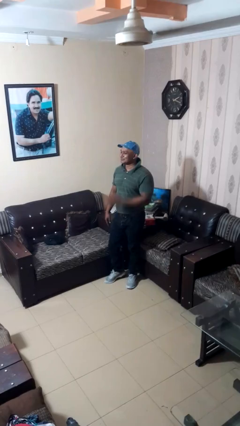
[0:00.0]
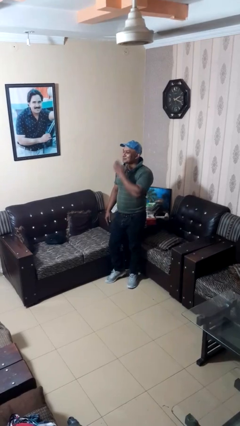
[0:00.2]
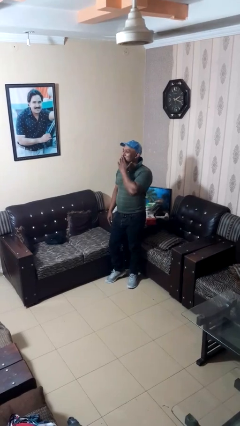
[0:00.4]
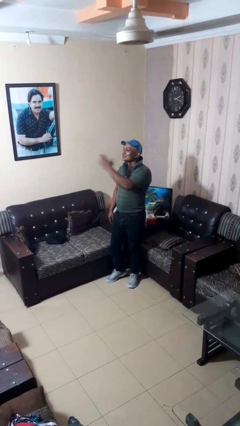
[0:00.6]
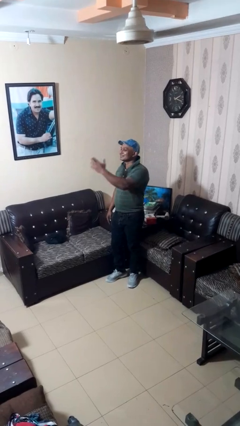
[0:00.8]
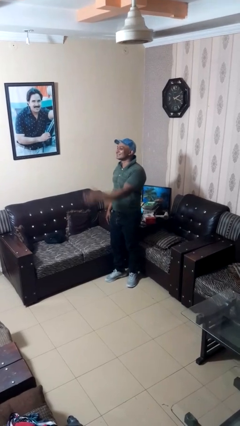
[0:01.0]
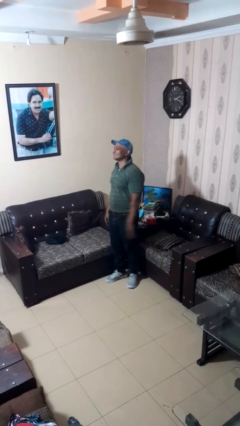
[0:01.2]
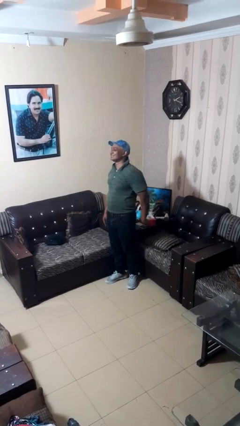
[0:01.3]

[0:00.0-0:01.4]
person gestures blow kiss

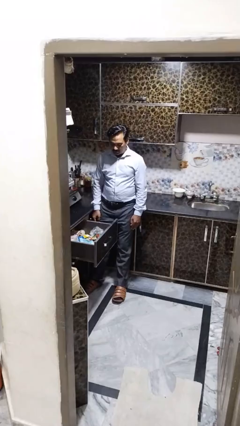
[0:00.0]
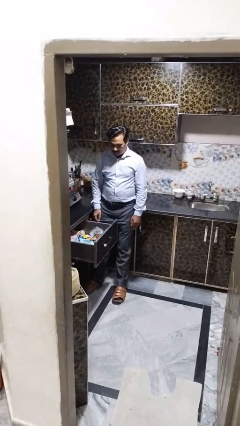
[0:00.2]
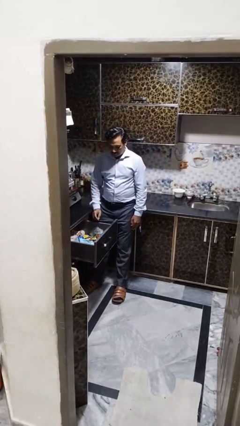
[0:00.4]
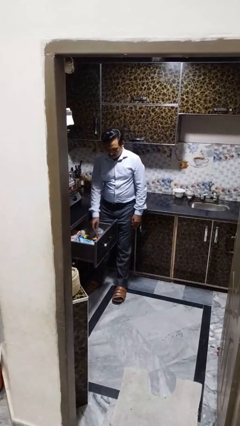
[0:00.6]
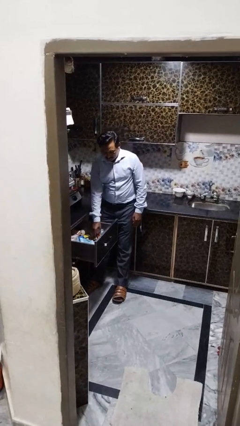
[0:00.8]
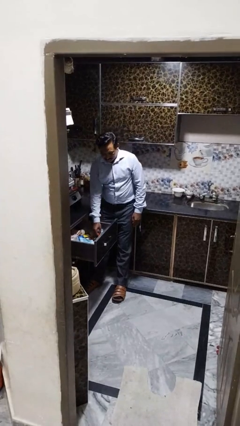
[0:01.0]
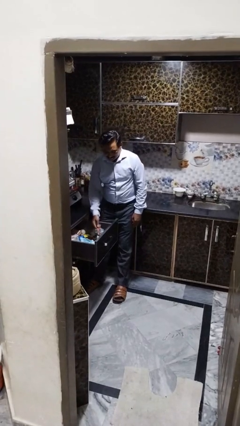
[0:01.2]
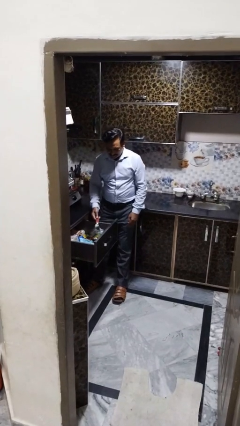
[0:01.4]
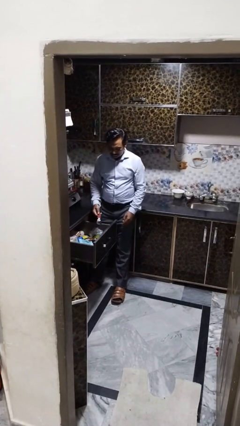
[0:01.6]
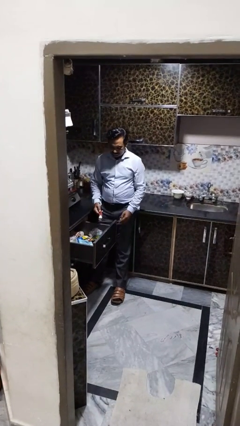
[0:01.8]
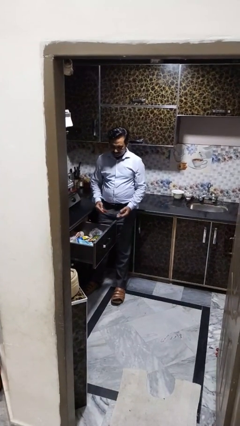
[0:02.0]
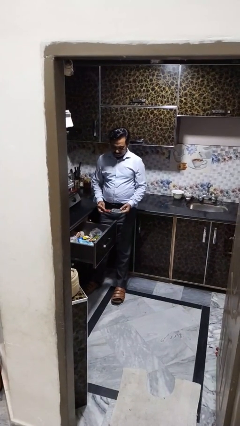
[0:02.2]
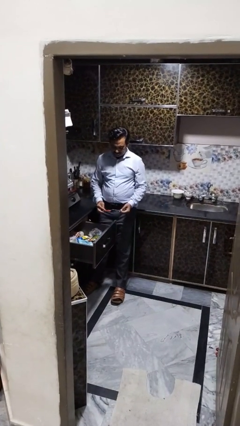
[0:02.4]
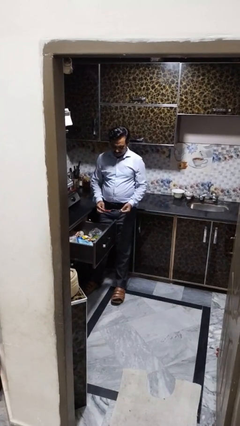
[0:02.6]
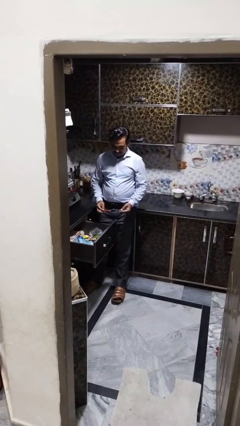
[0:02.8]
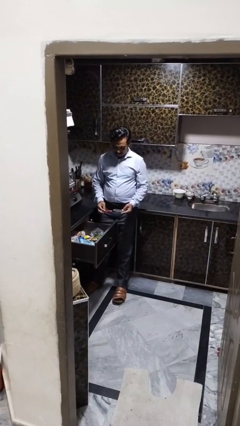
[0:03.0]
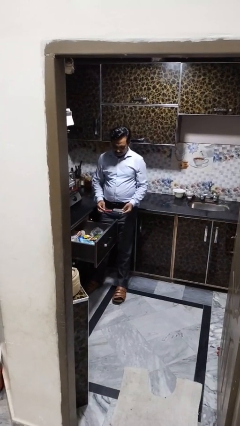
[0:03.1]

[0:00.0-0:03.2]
person takes object from kitchen drawer

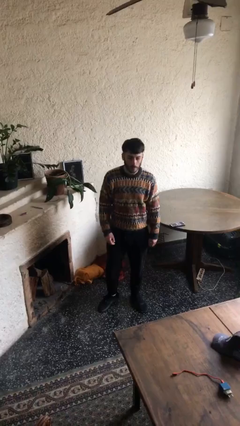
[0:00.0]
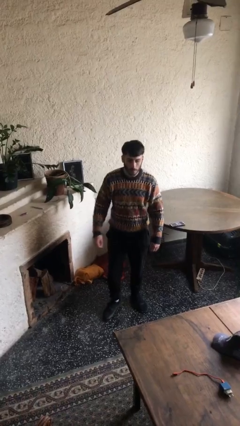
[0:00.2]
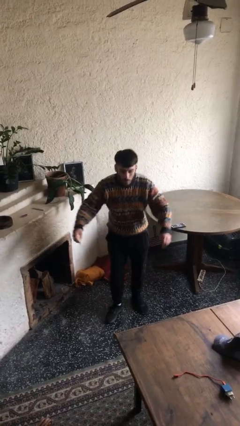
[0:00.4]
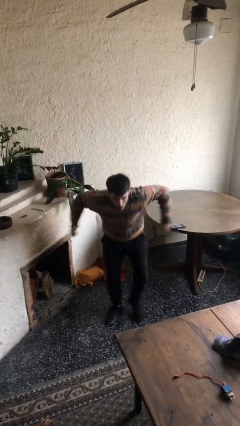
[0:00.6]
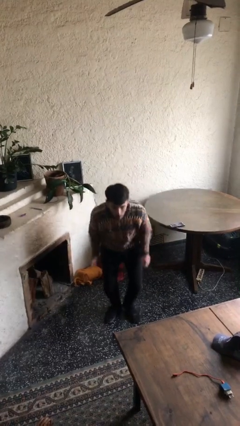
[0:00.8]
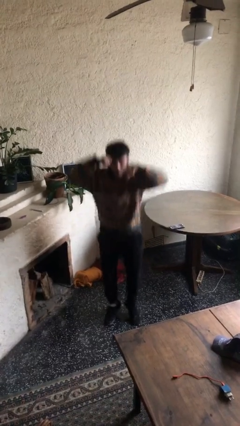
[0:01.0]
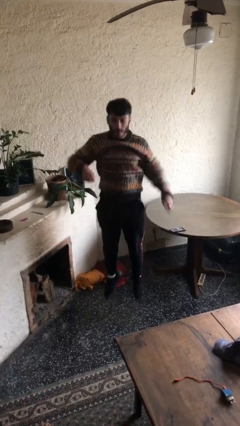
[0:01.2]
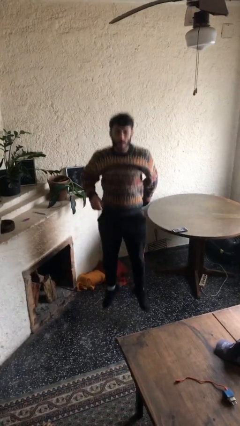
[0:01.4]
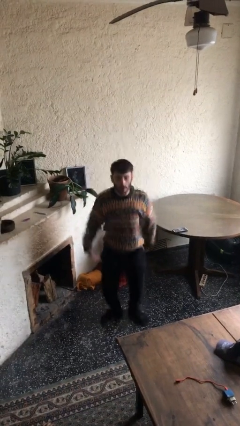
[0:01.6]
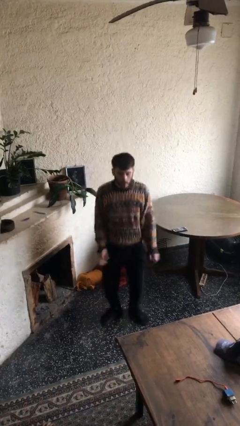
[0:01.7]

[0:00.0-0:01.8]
person jumps

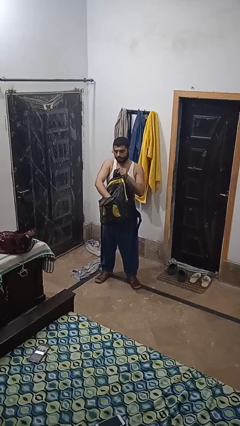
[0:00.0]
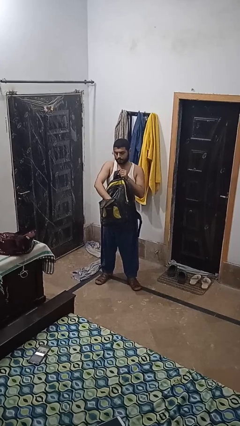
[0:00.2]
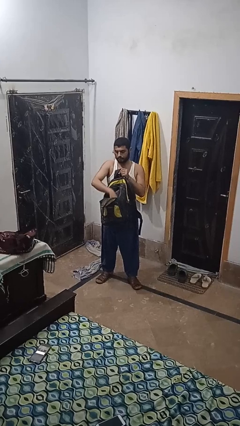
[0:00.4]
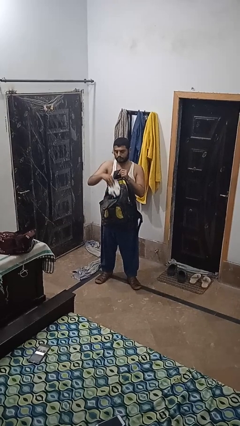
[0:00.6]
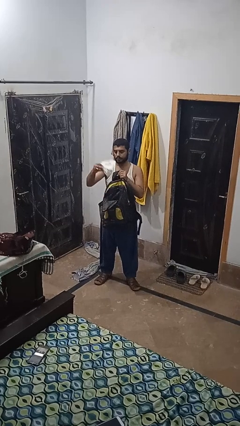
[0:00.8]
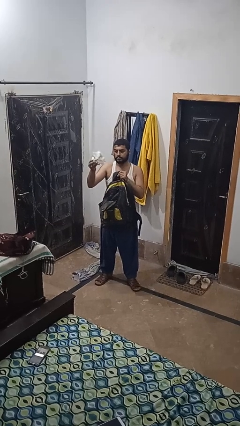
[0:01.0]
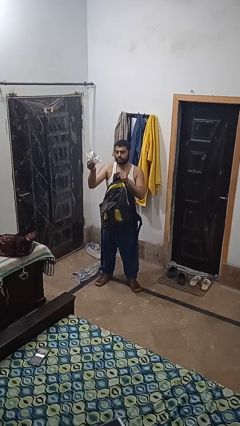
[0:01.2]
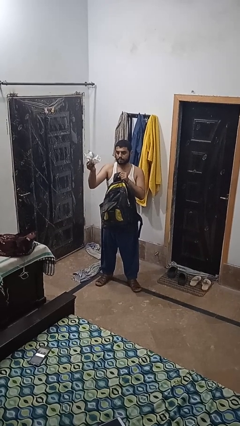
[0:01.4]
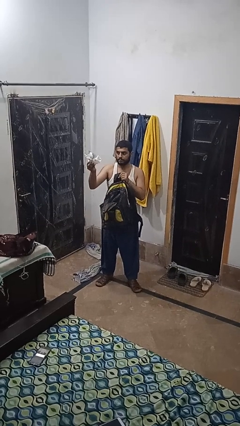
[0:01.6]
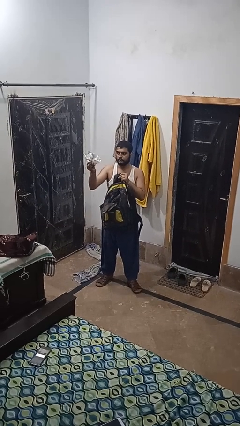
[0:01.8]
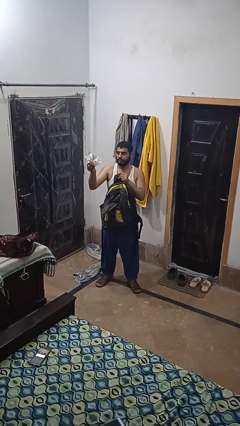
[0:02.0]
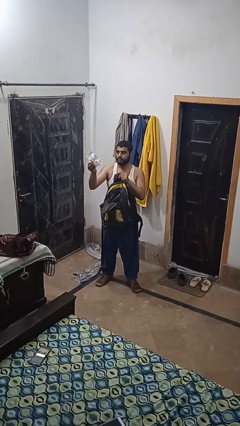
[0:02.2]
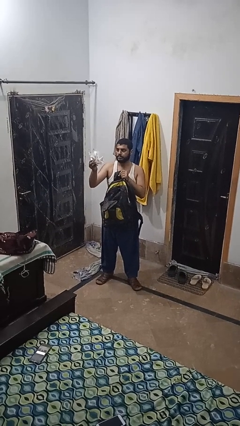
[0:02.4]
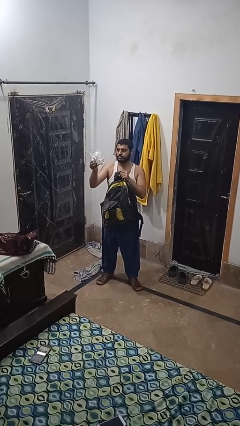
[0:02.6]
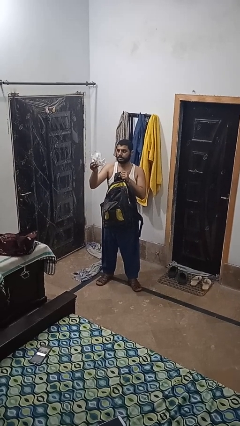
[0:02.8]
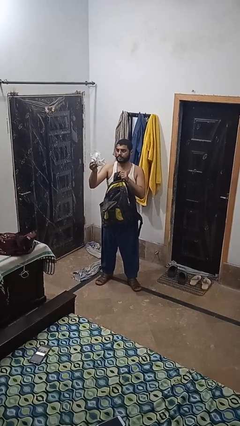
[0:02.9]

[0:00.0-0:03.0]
person takes object from backpack

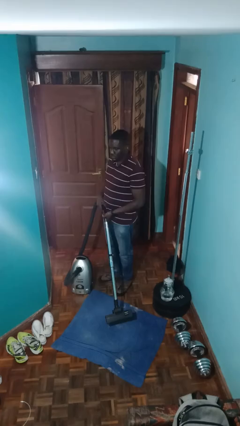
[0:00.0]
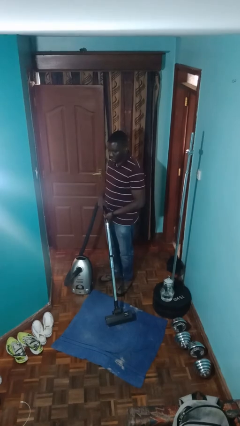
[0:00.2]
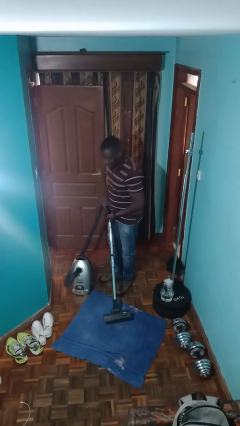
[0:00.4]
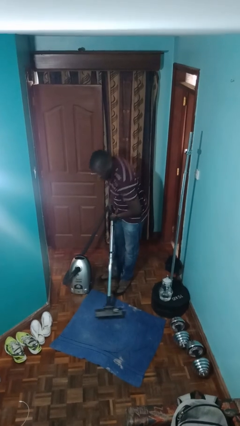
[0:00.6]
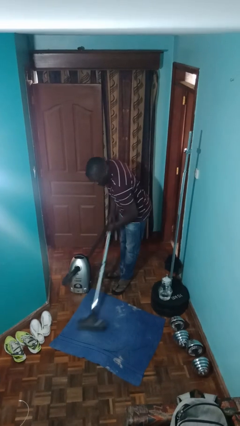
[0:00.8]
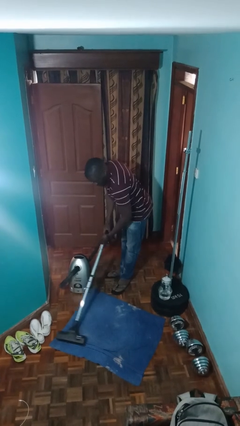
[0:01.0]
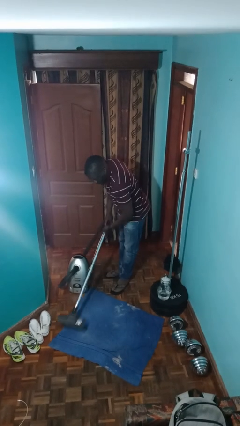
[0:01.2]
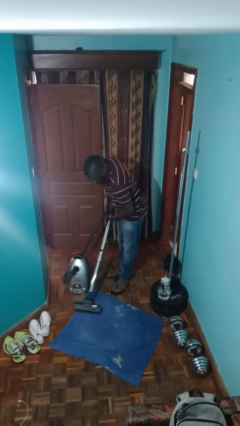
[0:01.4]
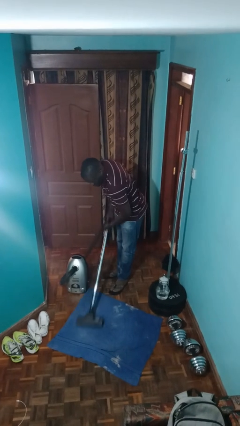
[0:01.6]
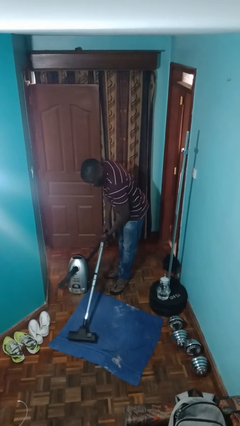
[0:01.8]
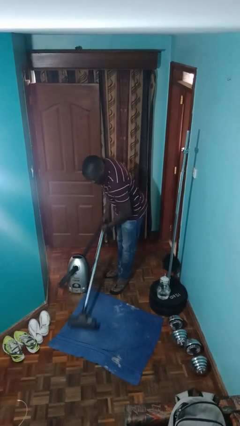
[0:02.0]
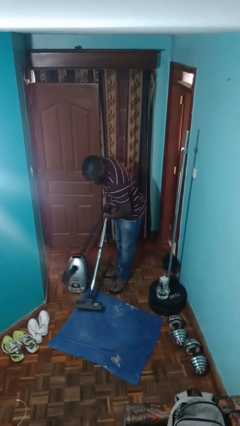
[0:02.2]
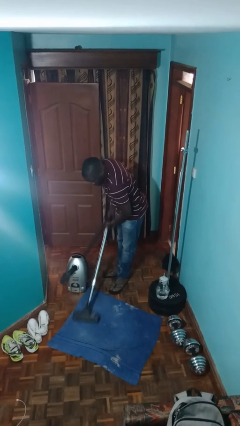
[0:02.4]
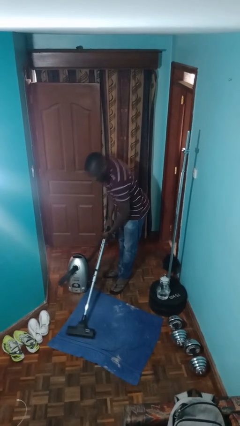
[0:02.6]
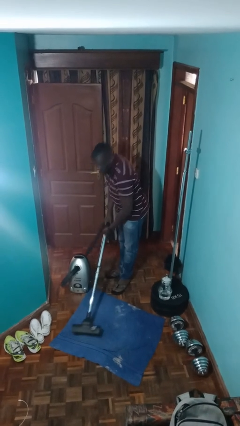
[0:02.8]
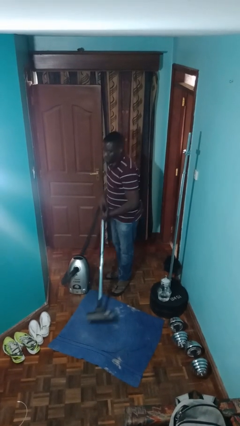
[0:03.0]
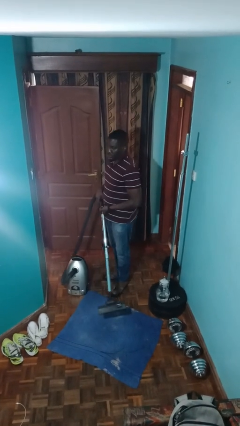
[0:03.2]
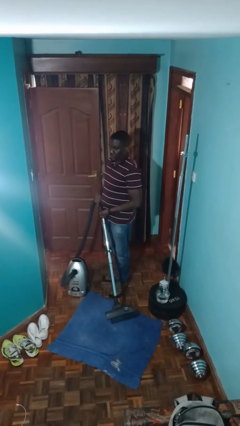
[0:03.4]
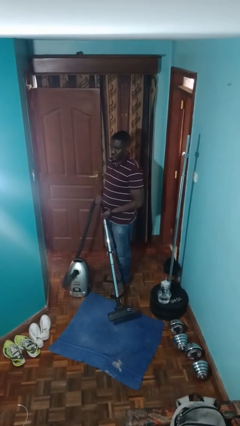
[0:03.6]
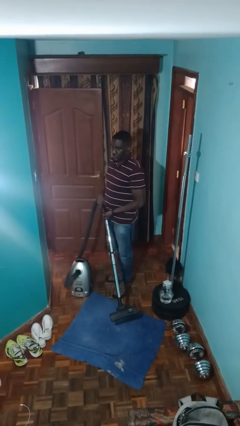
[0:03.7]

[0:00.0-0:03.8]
person vacuums carpet

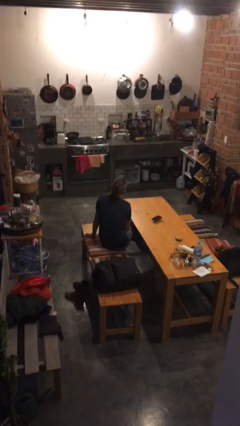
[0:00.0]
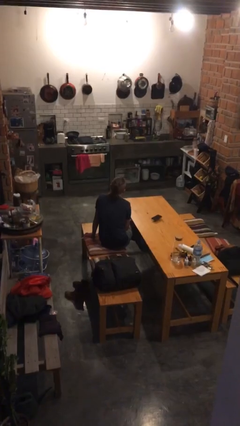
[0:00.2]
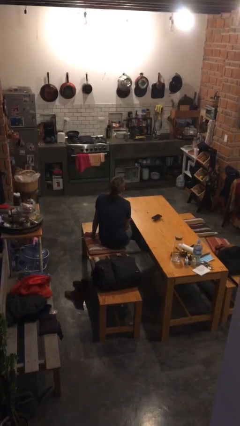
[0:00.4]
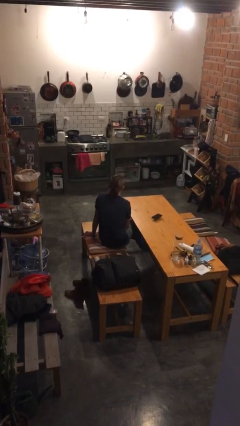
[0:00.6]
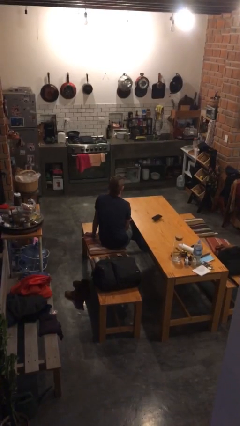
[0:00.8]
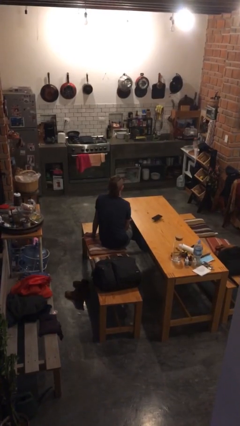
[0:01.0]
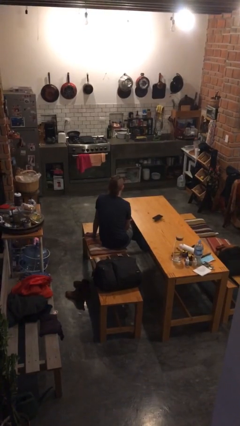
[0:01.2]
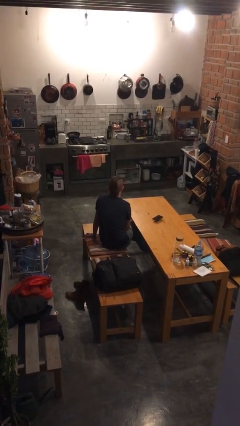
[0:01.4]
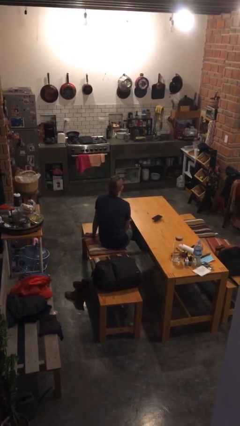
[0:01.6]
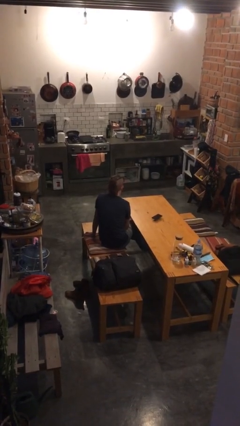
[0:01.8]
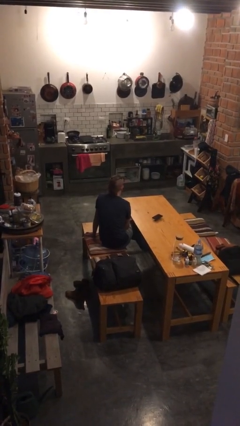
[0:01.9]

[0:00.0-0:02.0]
person nods head

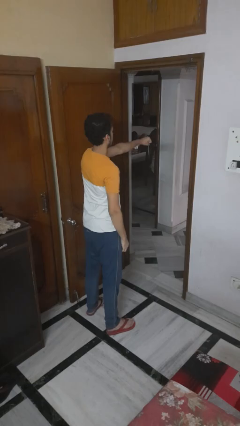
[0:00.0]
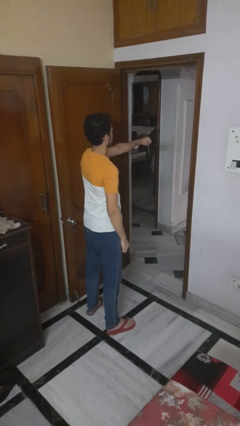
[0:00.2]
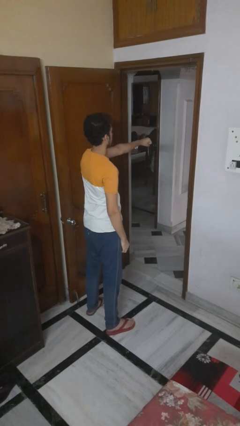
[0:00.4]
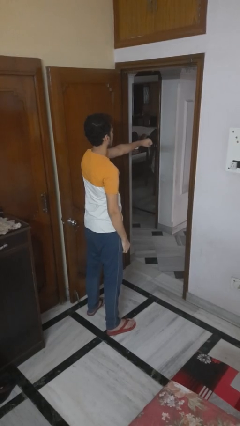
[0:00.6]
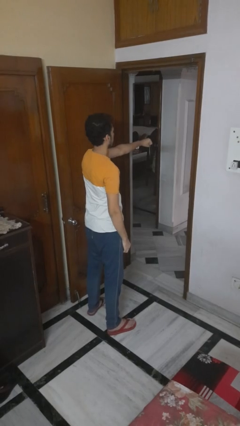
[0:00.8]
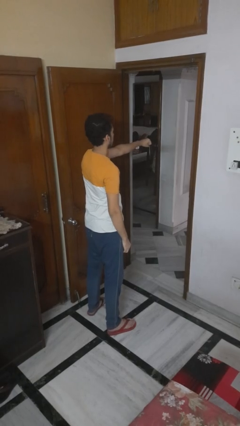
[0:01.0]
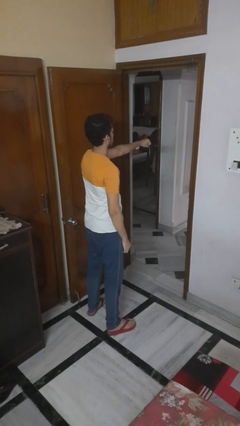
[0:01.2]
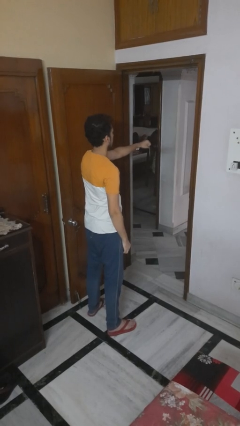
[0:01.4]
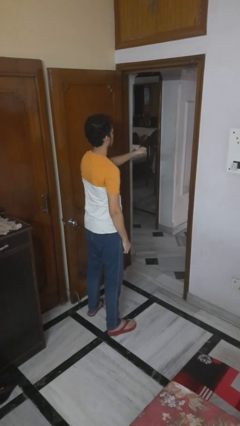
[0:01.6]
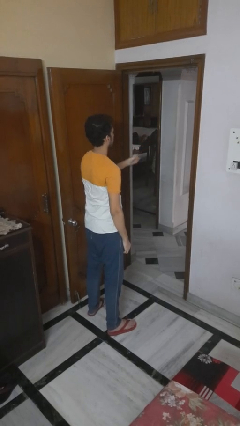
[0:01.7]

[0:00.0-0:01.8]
person punches
